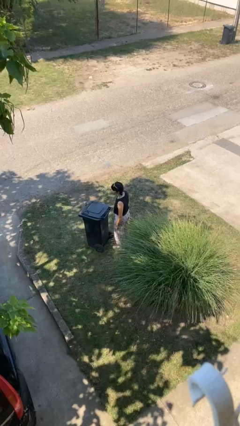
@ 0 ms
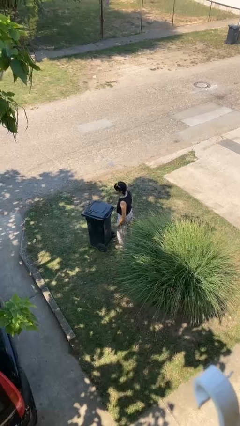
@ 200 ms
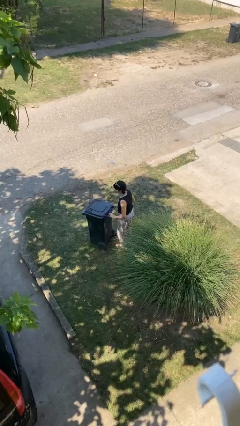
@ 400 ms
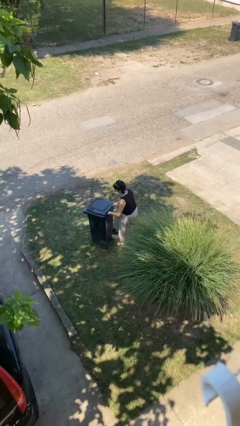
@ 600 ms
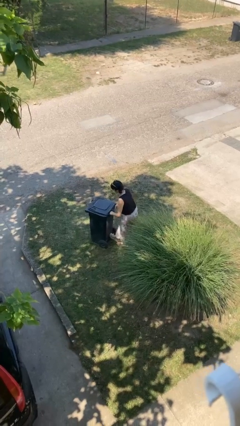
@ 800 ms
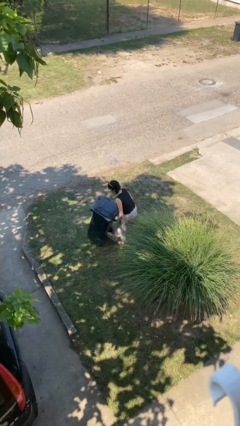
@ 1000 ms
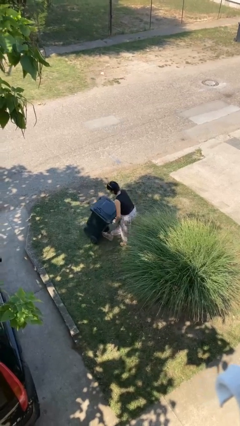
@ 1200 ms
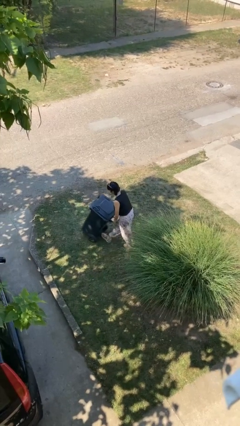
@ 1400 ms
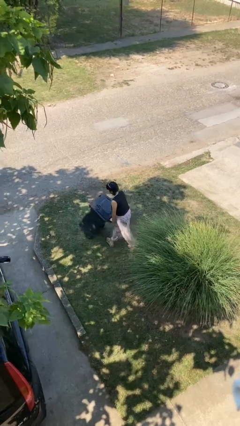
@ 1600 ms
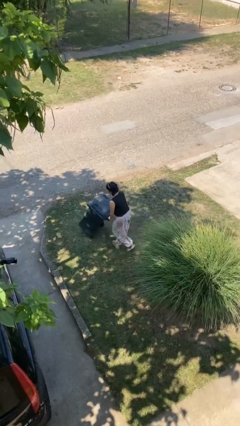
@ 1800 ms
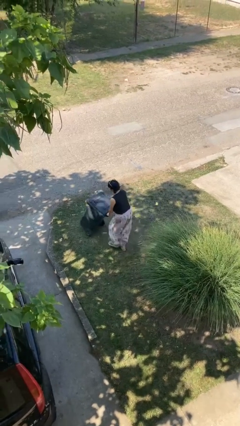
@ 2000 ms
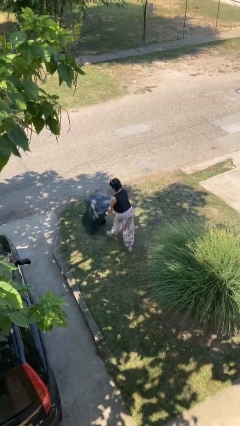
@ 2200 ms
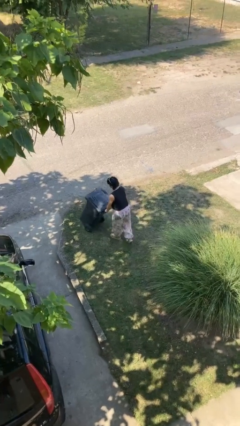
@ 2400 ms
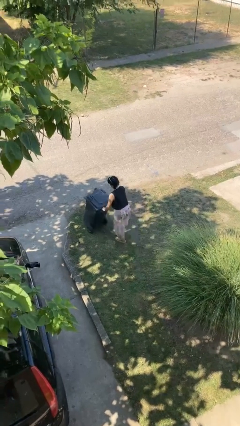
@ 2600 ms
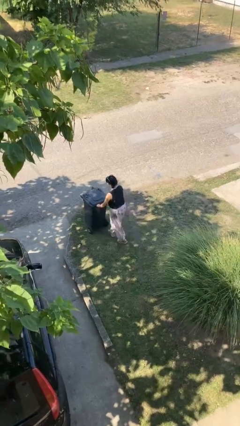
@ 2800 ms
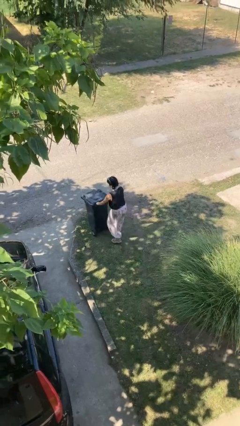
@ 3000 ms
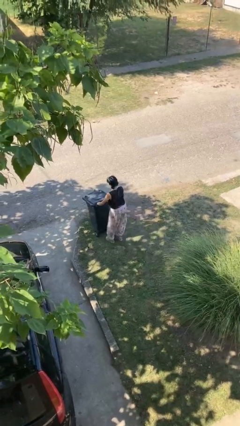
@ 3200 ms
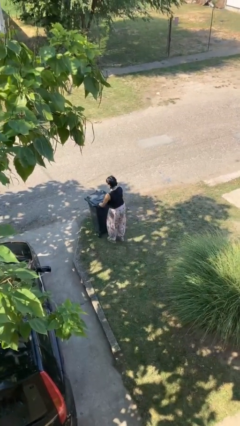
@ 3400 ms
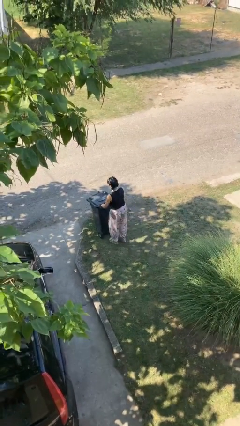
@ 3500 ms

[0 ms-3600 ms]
person pushes wheeled trashcan

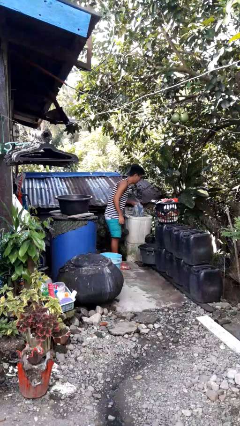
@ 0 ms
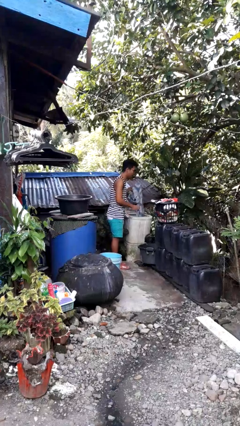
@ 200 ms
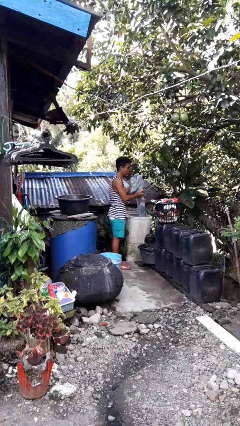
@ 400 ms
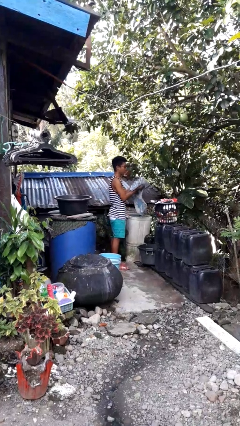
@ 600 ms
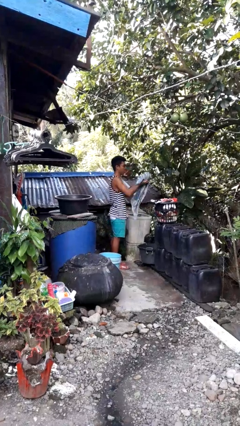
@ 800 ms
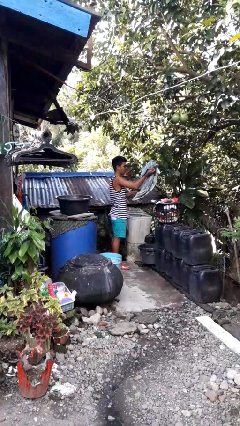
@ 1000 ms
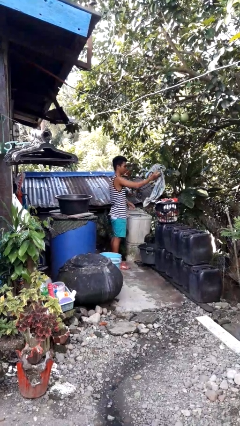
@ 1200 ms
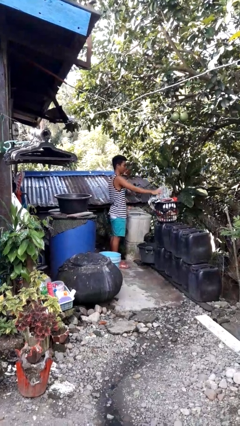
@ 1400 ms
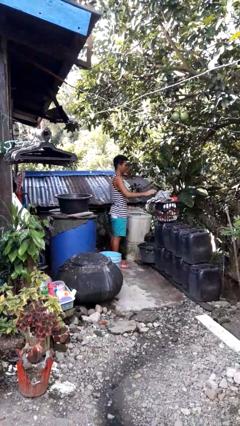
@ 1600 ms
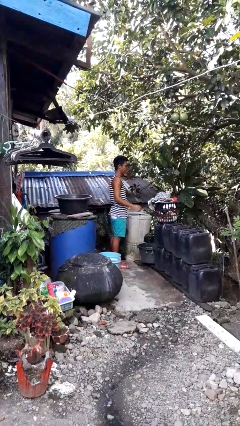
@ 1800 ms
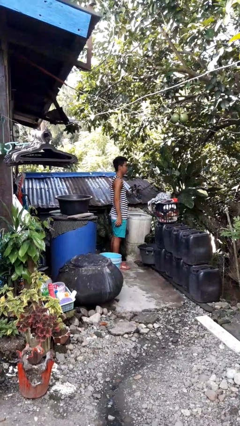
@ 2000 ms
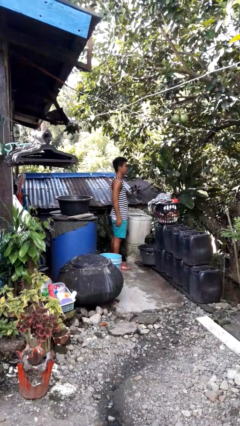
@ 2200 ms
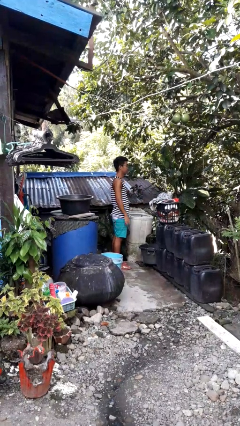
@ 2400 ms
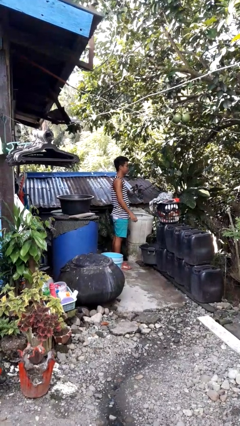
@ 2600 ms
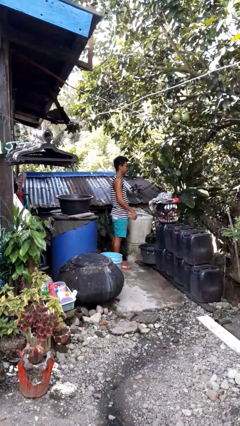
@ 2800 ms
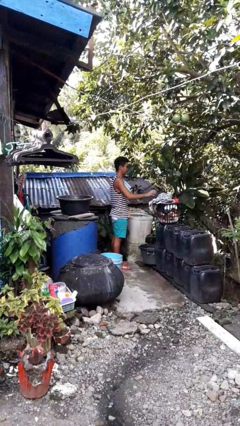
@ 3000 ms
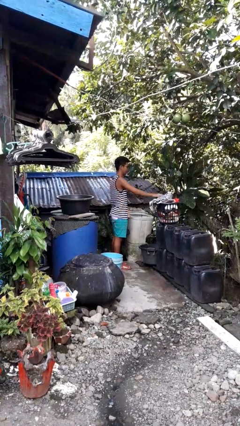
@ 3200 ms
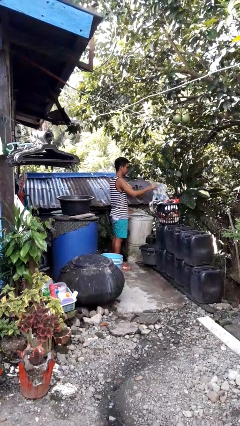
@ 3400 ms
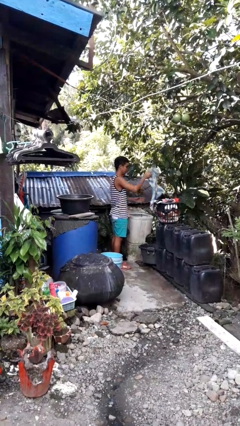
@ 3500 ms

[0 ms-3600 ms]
person unloads clotheswasher

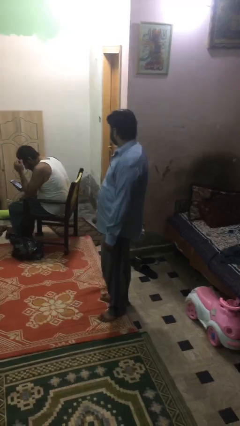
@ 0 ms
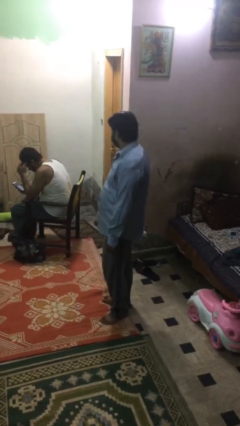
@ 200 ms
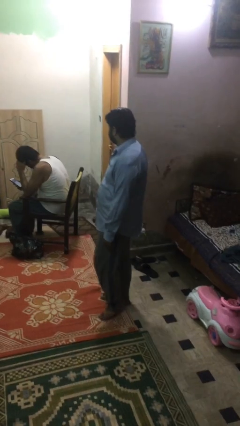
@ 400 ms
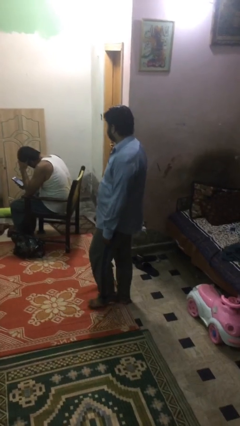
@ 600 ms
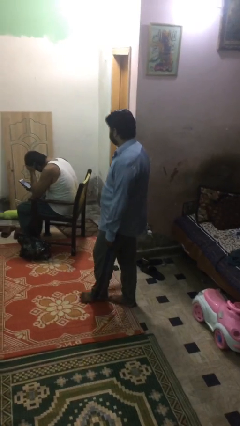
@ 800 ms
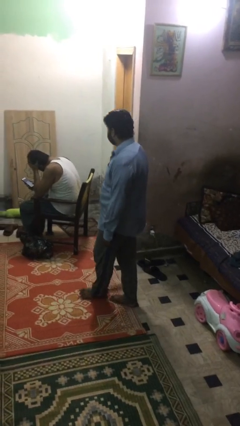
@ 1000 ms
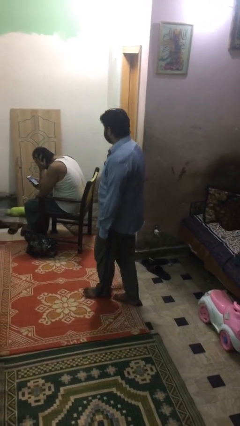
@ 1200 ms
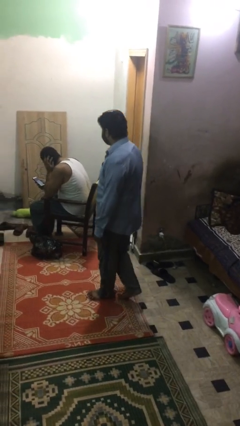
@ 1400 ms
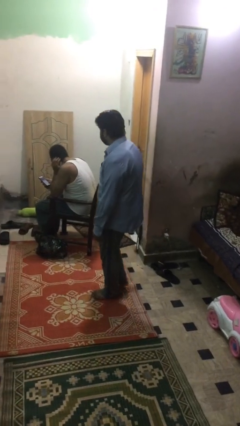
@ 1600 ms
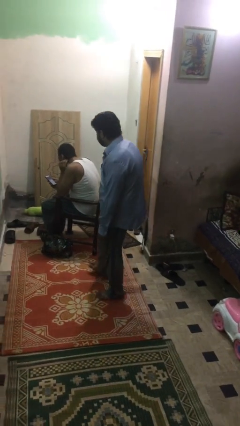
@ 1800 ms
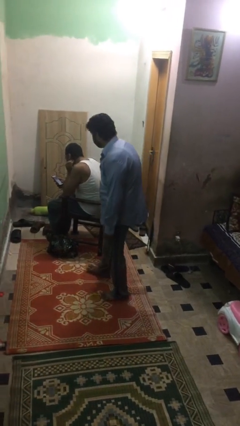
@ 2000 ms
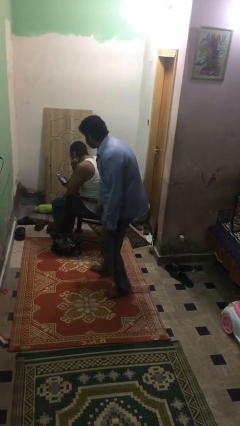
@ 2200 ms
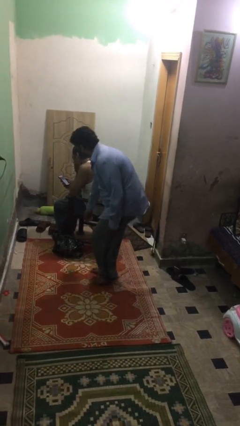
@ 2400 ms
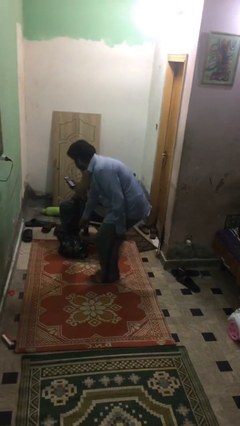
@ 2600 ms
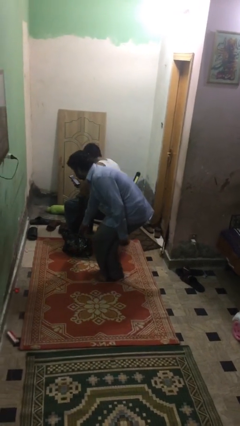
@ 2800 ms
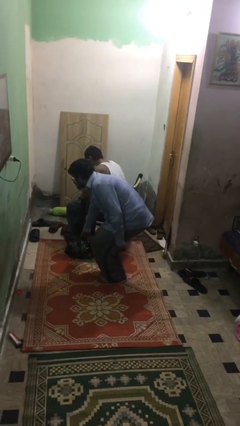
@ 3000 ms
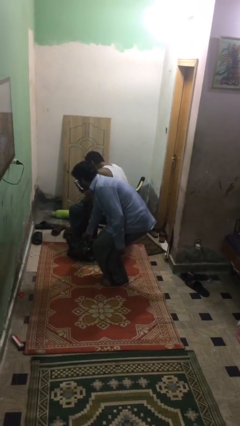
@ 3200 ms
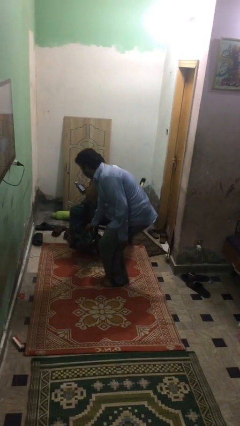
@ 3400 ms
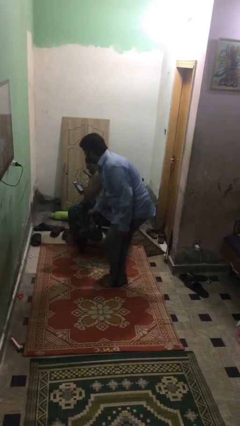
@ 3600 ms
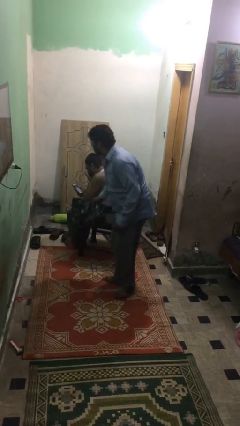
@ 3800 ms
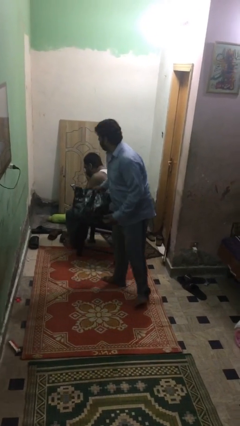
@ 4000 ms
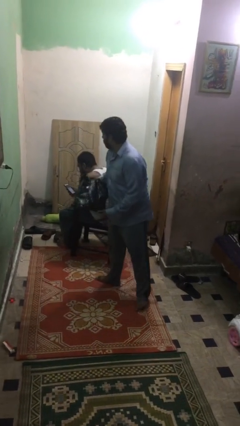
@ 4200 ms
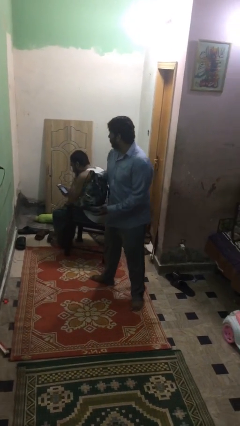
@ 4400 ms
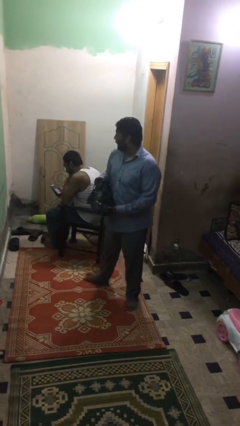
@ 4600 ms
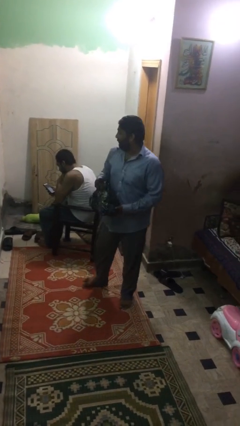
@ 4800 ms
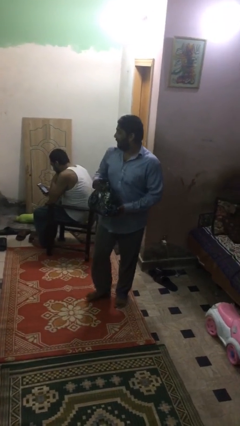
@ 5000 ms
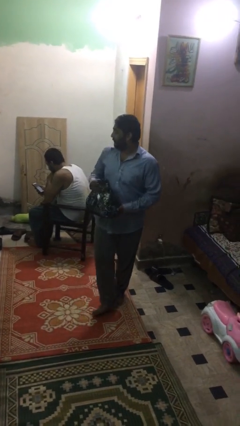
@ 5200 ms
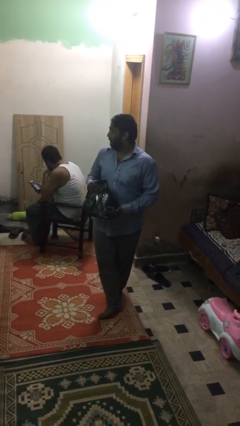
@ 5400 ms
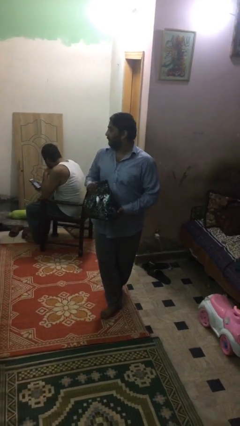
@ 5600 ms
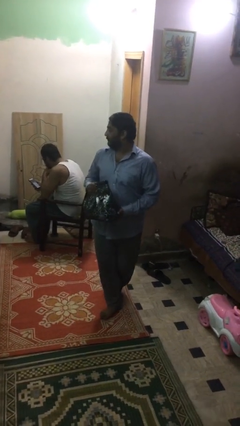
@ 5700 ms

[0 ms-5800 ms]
person steals object from person

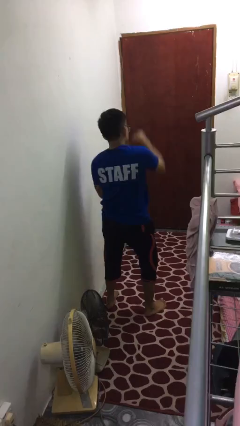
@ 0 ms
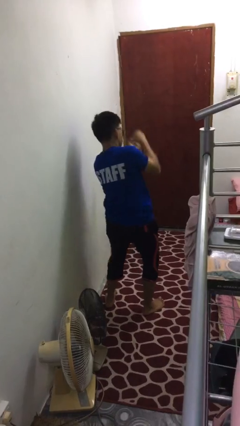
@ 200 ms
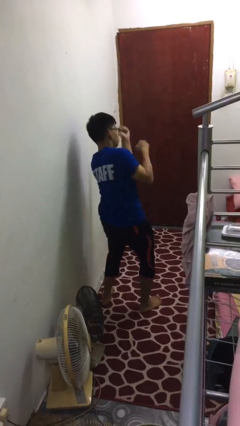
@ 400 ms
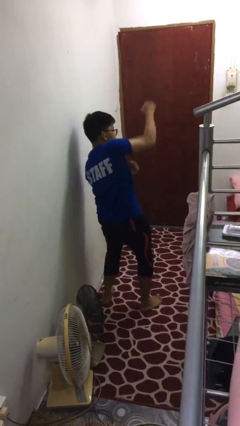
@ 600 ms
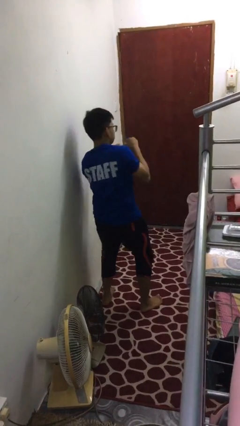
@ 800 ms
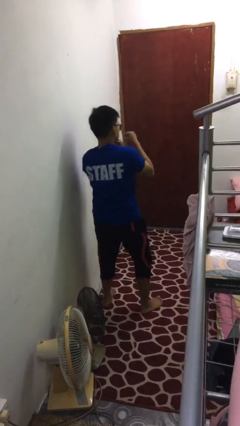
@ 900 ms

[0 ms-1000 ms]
person punches

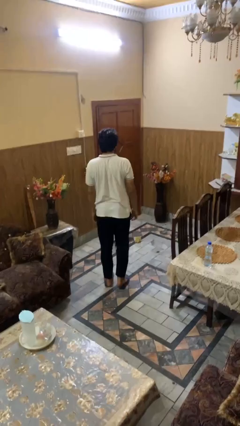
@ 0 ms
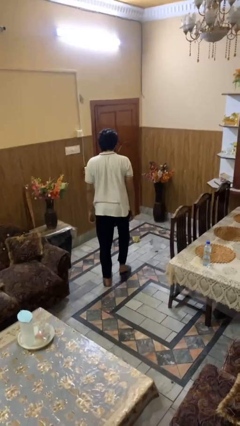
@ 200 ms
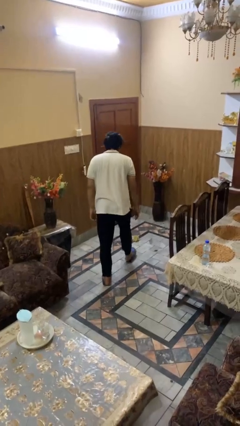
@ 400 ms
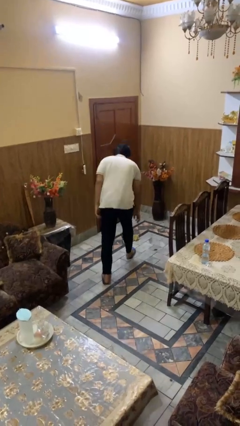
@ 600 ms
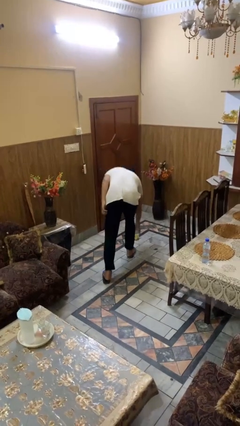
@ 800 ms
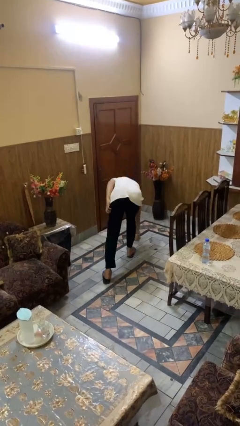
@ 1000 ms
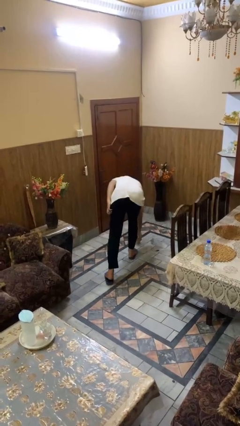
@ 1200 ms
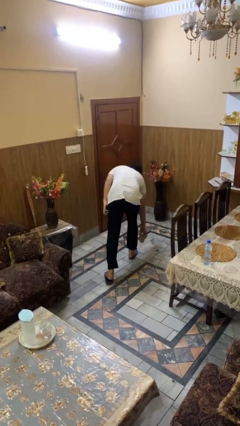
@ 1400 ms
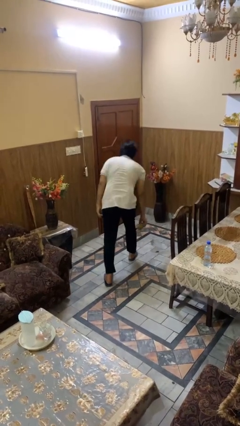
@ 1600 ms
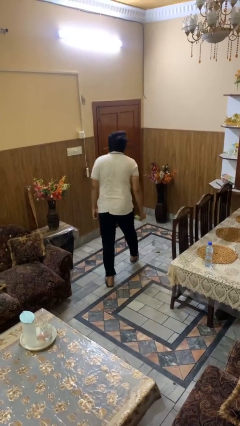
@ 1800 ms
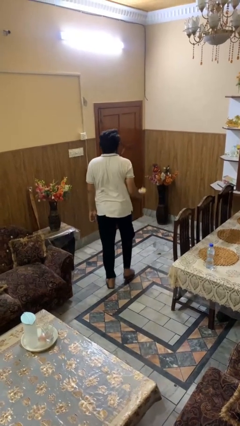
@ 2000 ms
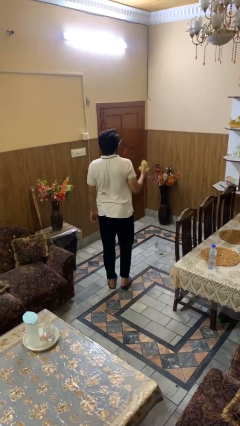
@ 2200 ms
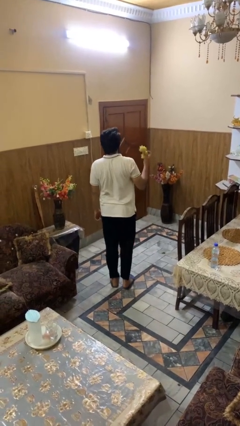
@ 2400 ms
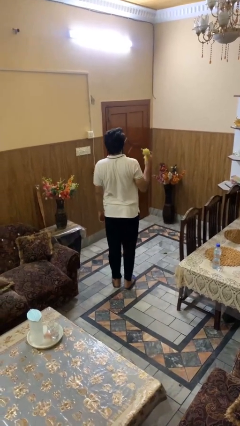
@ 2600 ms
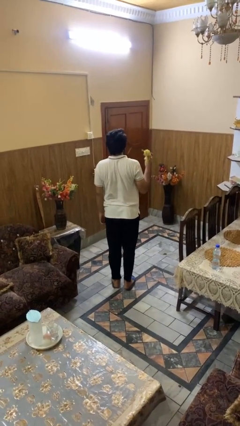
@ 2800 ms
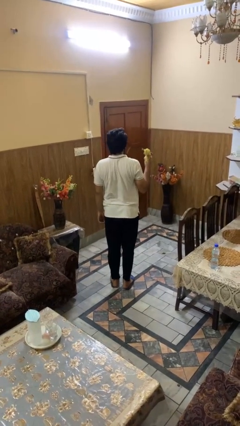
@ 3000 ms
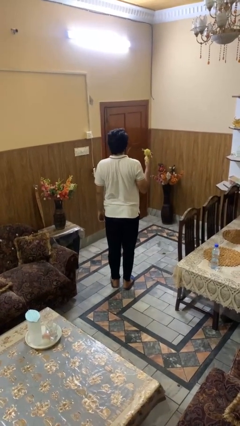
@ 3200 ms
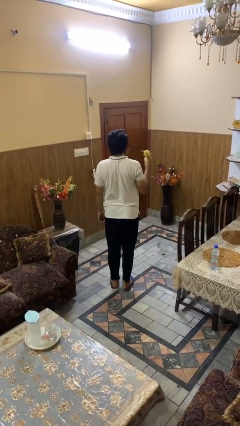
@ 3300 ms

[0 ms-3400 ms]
person picks up object from floor
